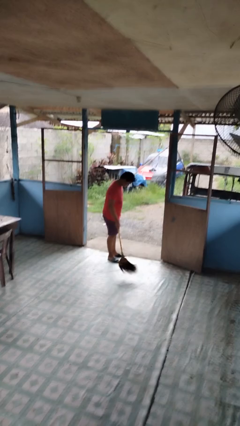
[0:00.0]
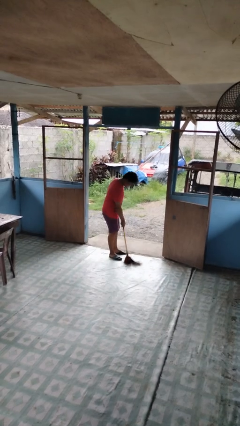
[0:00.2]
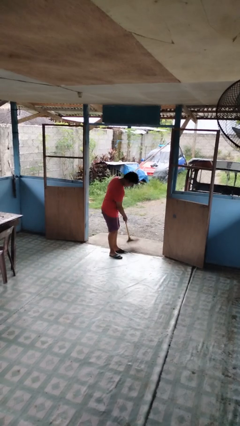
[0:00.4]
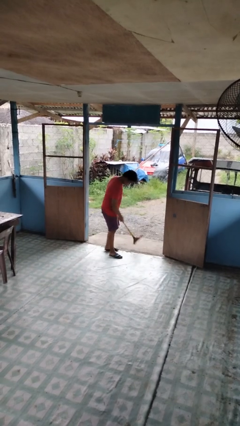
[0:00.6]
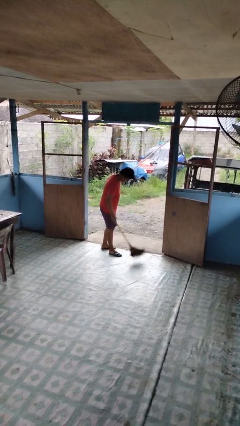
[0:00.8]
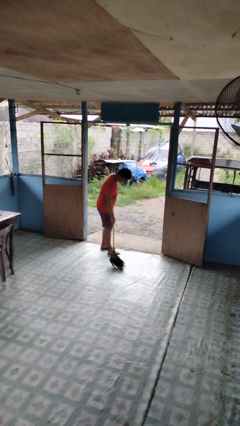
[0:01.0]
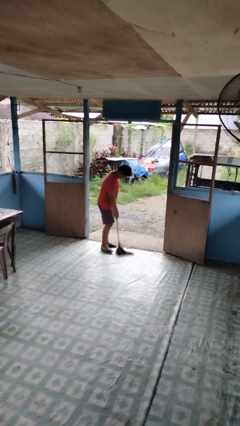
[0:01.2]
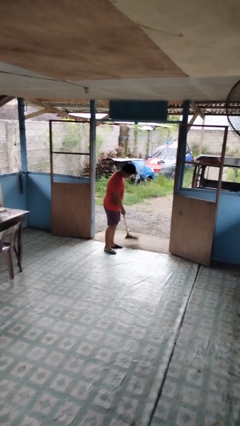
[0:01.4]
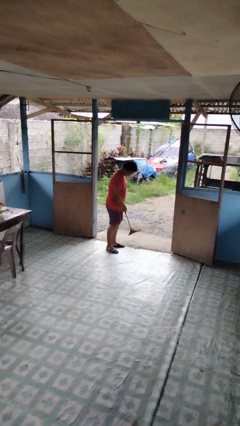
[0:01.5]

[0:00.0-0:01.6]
person sweeps floor

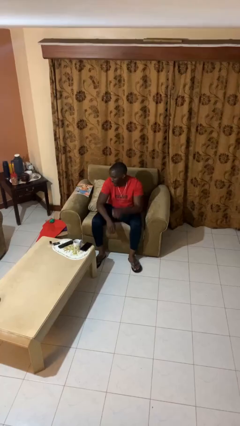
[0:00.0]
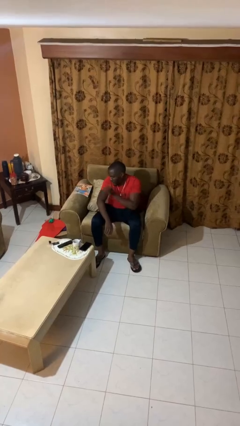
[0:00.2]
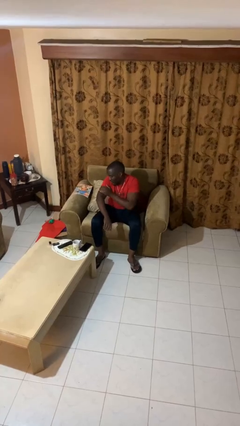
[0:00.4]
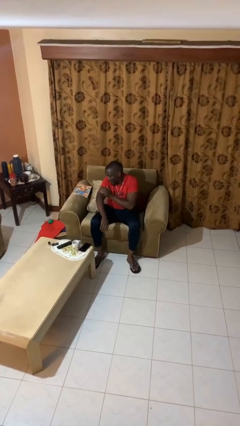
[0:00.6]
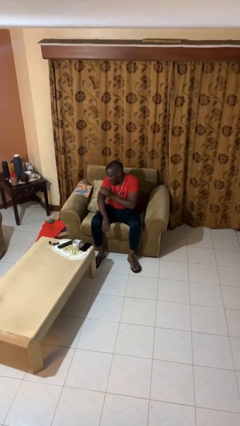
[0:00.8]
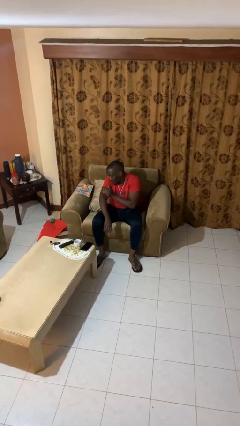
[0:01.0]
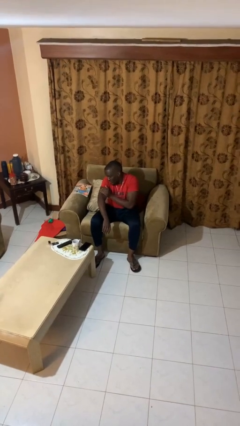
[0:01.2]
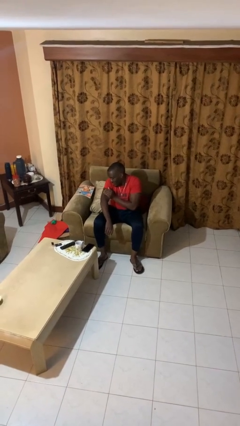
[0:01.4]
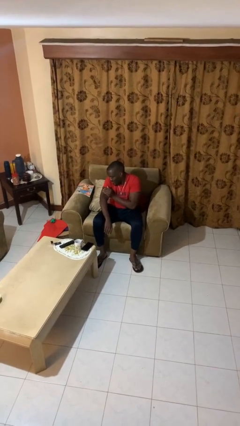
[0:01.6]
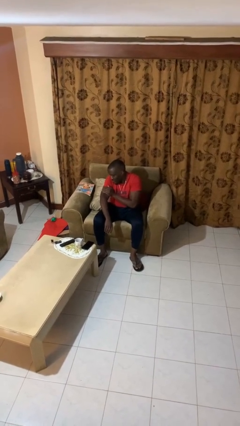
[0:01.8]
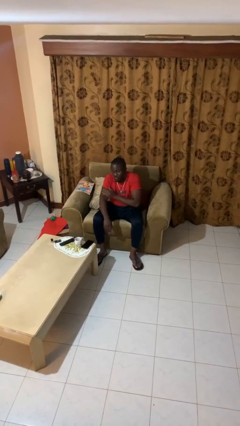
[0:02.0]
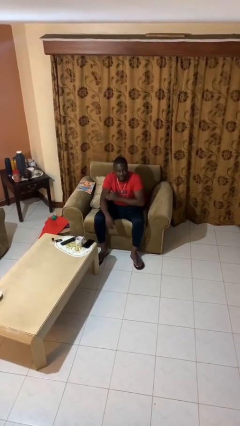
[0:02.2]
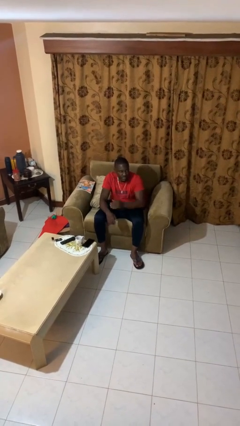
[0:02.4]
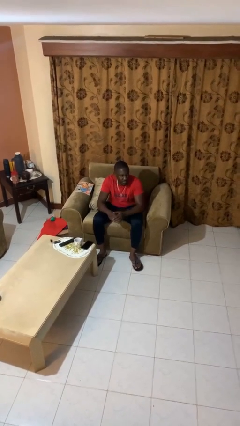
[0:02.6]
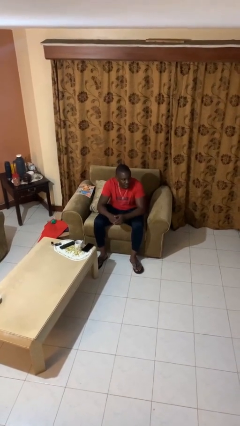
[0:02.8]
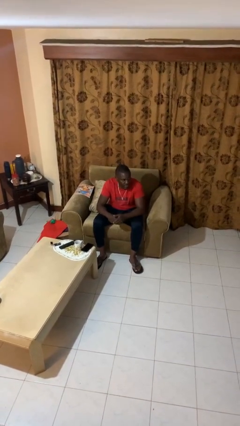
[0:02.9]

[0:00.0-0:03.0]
person swats bug

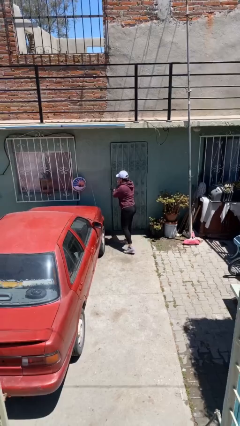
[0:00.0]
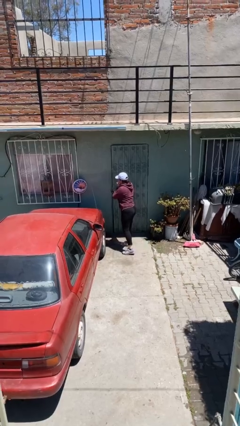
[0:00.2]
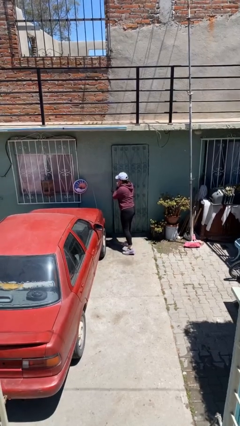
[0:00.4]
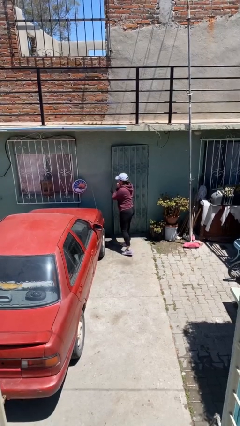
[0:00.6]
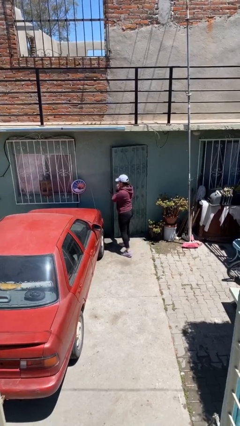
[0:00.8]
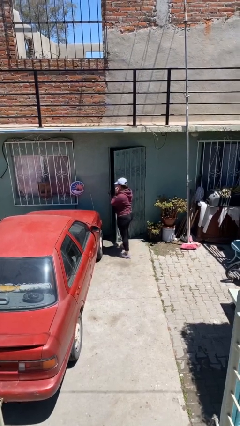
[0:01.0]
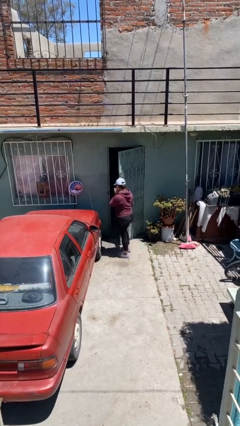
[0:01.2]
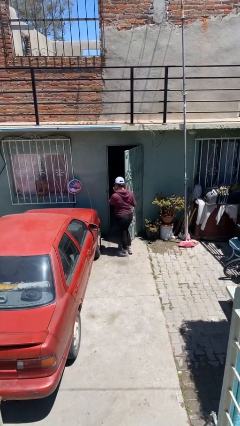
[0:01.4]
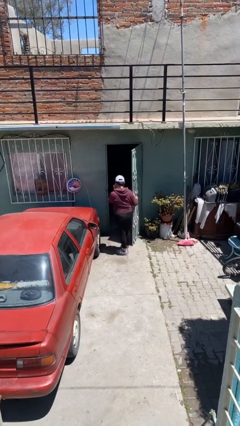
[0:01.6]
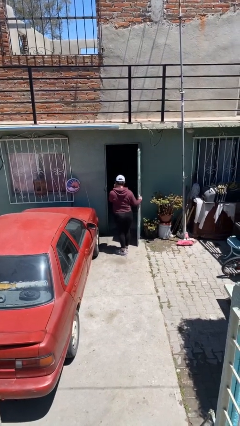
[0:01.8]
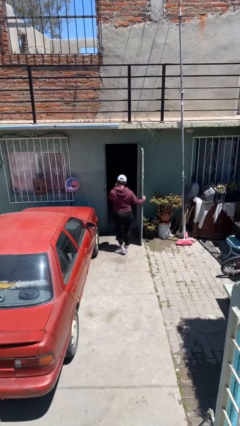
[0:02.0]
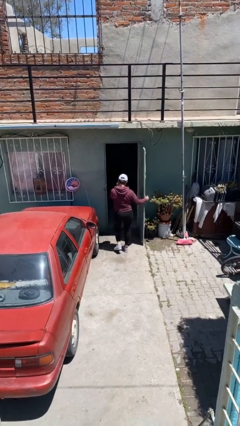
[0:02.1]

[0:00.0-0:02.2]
person opens facility door

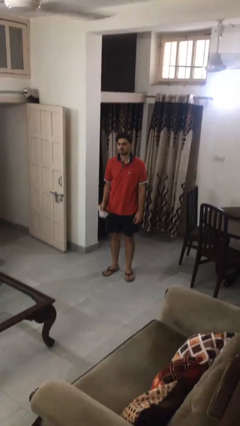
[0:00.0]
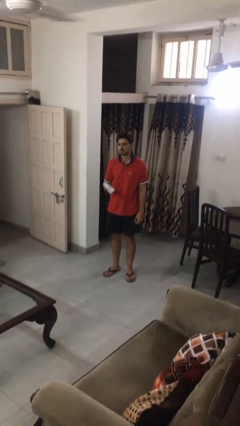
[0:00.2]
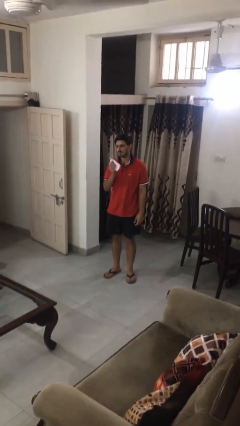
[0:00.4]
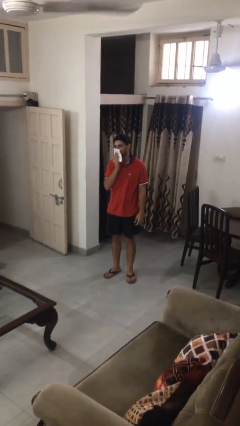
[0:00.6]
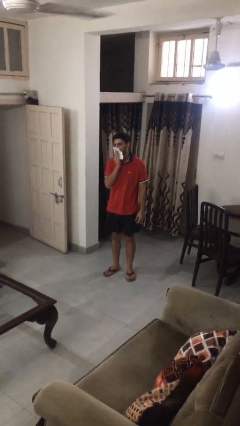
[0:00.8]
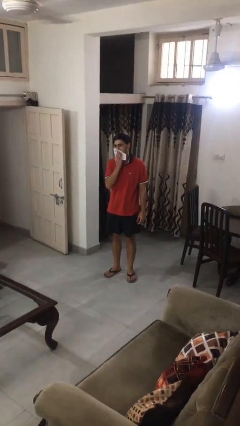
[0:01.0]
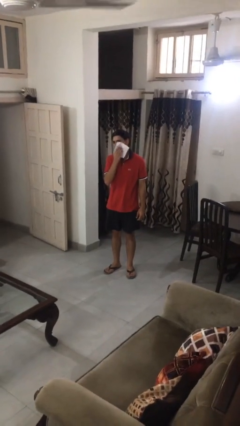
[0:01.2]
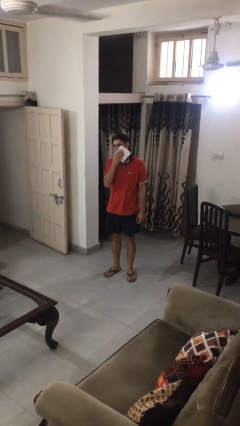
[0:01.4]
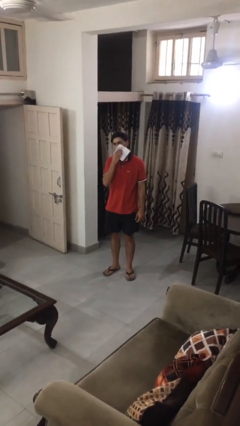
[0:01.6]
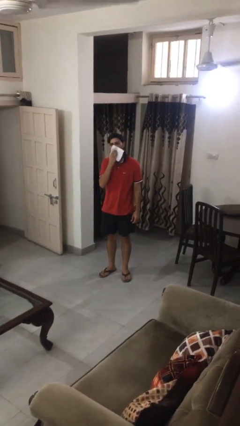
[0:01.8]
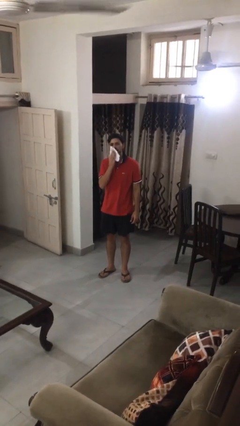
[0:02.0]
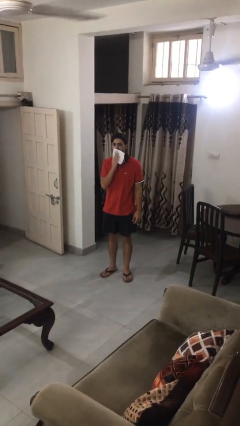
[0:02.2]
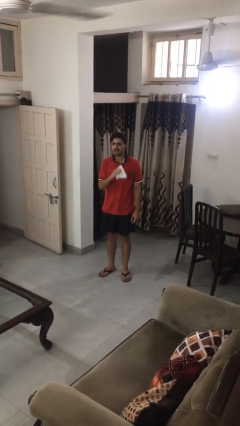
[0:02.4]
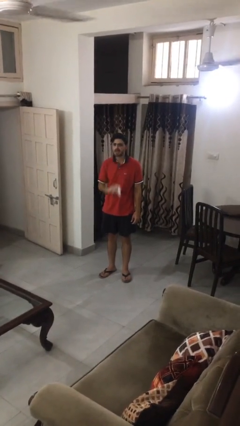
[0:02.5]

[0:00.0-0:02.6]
person wipes mouth with napkin

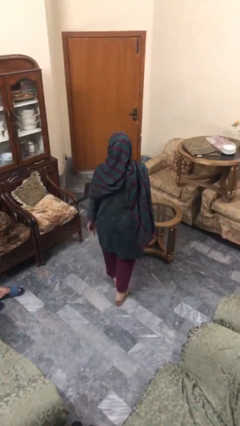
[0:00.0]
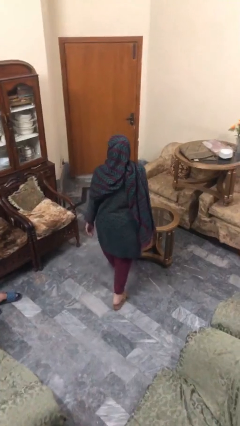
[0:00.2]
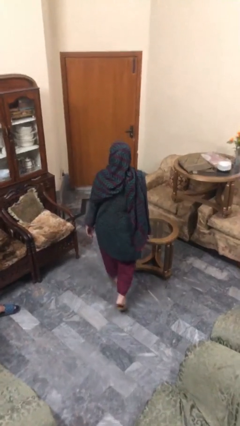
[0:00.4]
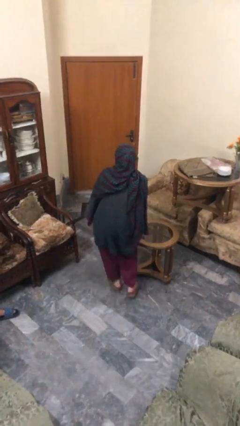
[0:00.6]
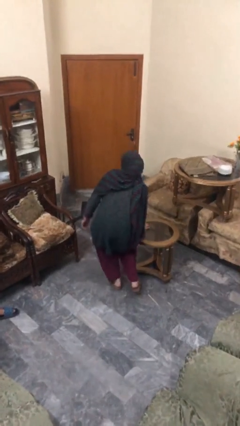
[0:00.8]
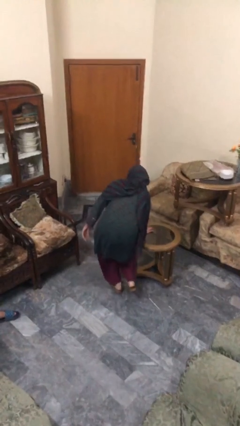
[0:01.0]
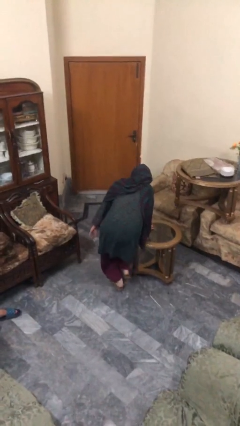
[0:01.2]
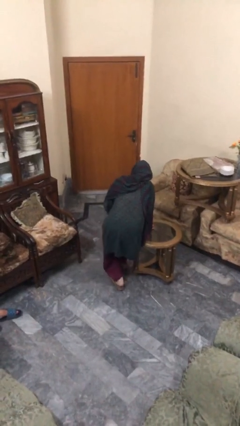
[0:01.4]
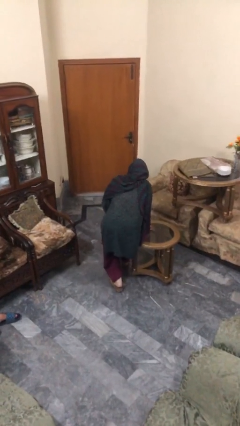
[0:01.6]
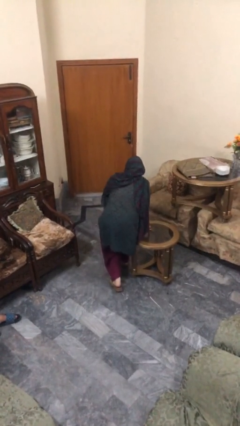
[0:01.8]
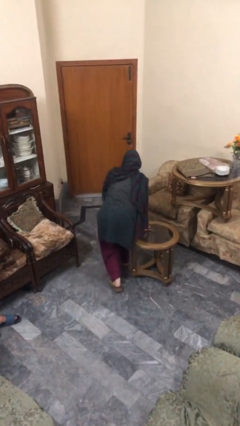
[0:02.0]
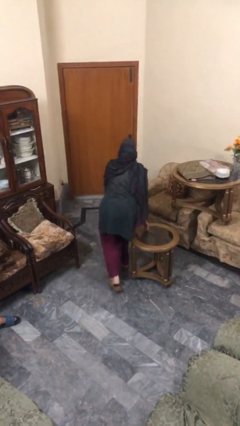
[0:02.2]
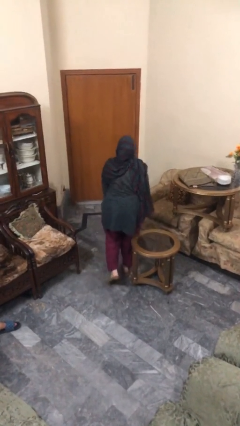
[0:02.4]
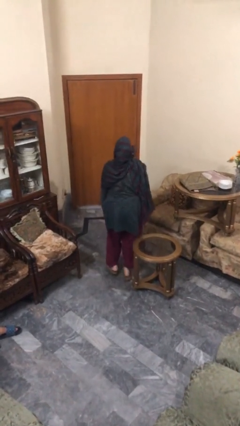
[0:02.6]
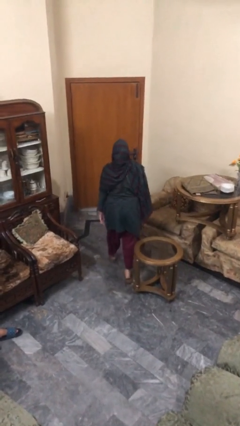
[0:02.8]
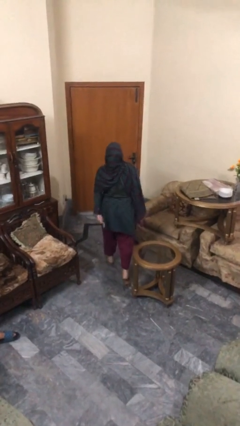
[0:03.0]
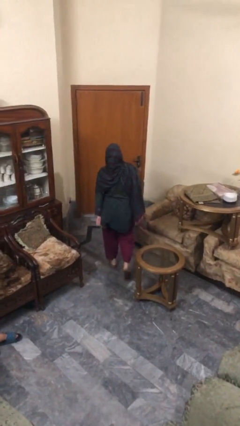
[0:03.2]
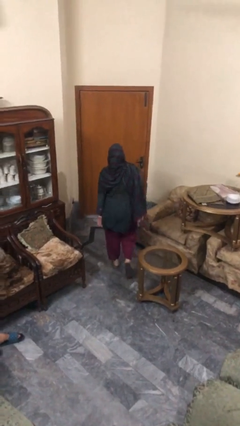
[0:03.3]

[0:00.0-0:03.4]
person bumps into table

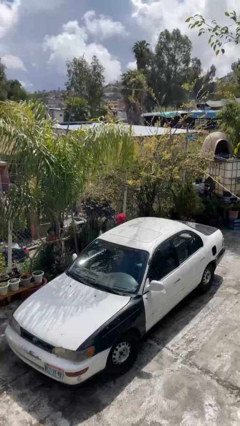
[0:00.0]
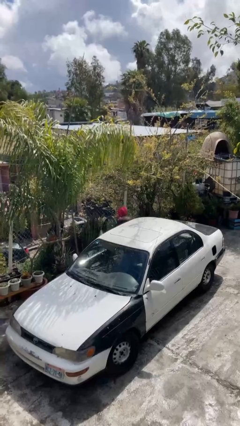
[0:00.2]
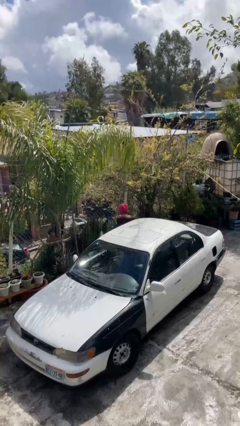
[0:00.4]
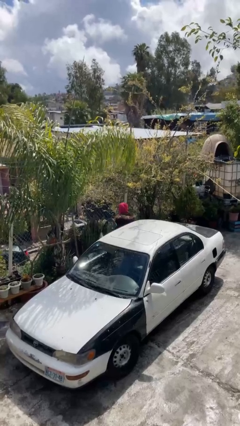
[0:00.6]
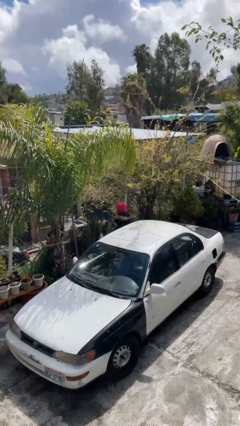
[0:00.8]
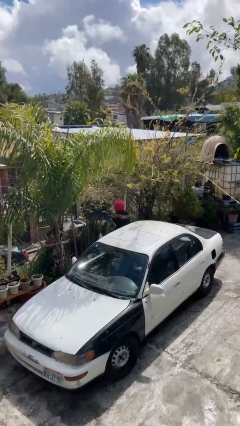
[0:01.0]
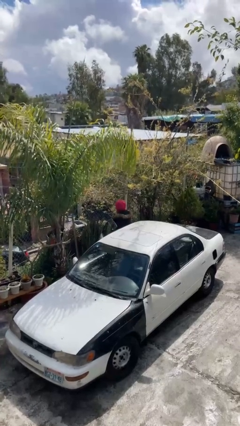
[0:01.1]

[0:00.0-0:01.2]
person exits car

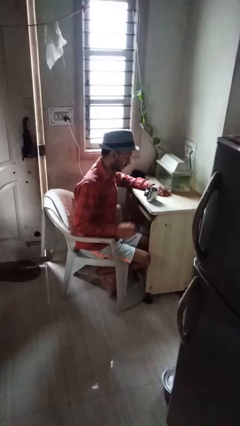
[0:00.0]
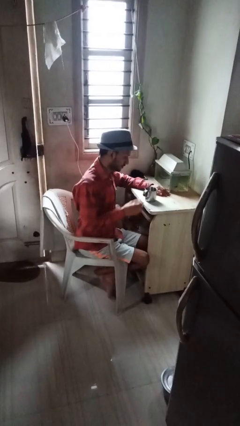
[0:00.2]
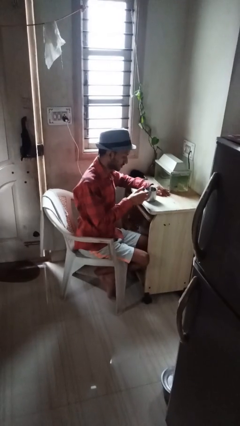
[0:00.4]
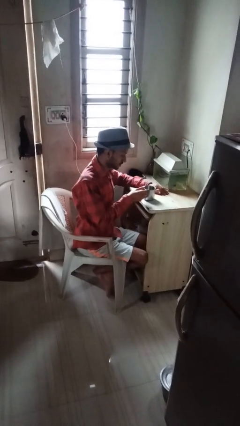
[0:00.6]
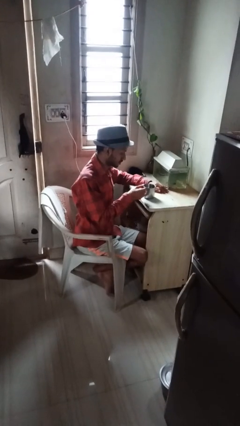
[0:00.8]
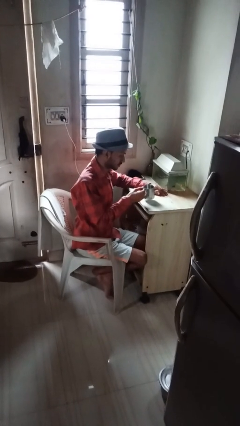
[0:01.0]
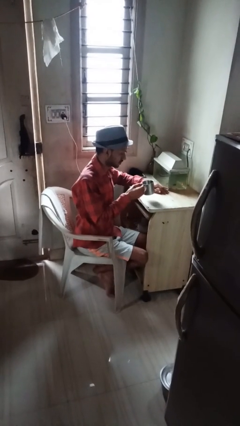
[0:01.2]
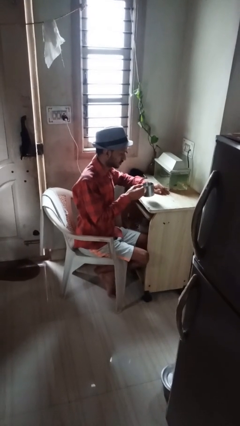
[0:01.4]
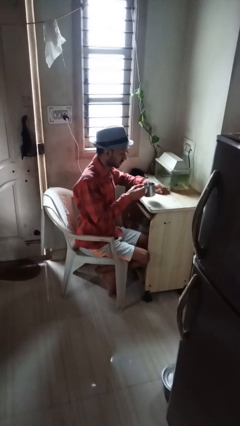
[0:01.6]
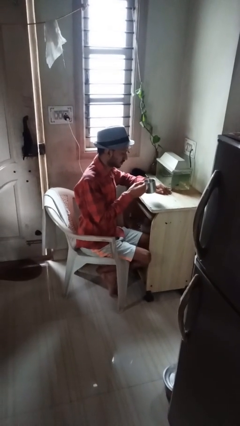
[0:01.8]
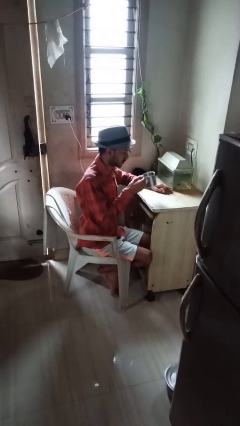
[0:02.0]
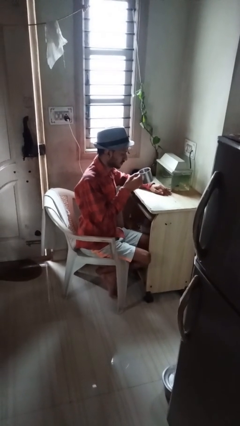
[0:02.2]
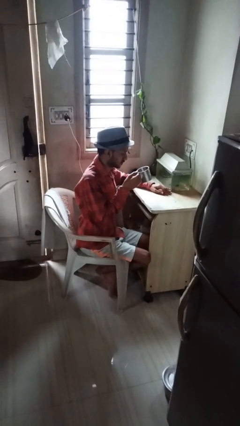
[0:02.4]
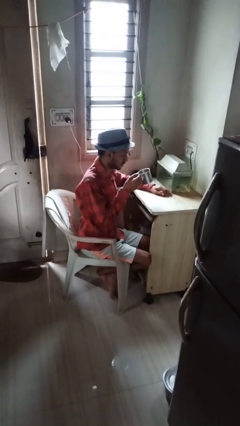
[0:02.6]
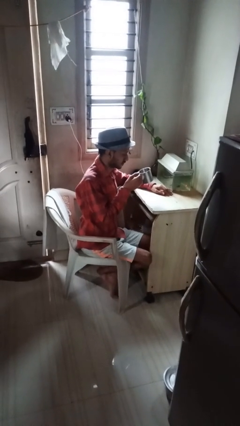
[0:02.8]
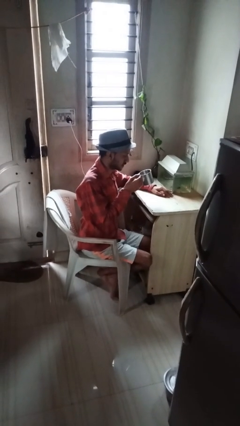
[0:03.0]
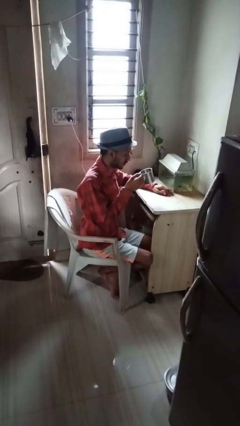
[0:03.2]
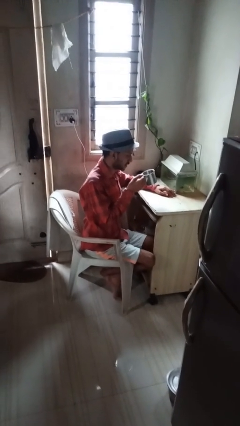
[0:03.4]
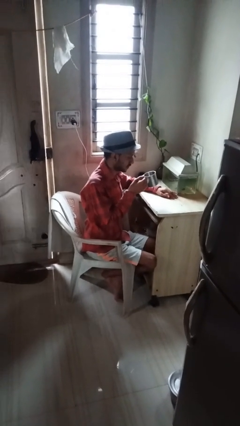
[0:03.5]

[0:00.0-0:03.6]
person picks up object from table
